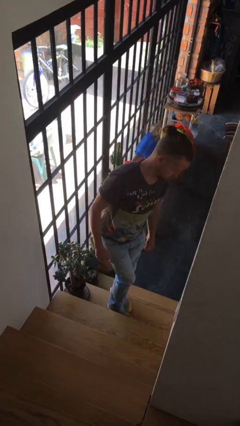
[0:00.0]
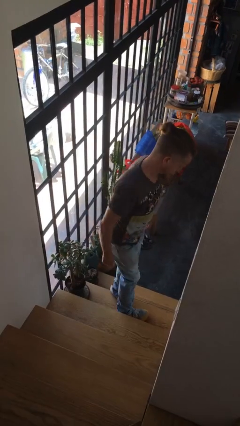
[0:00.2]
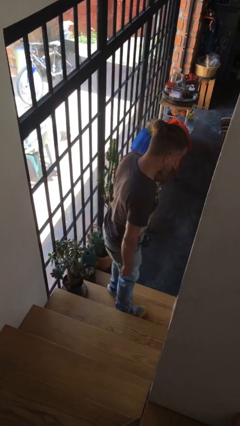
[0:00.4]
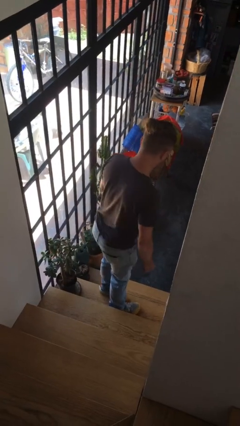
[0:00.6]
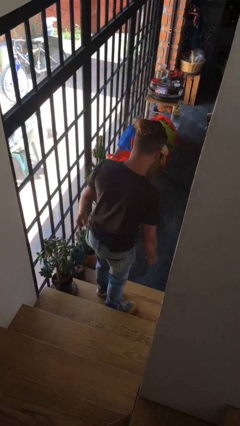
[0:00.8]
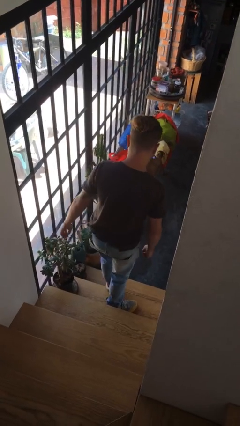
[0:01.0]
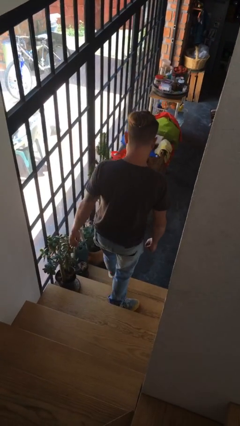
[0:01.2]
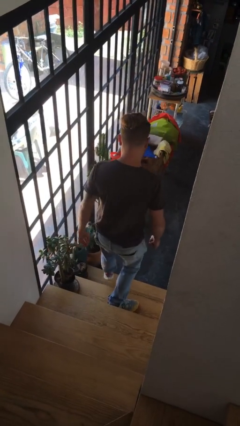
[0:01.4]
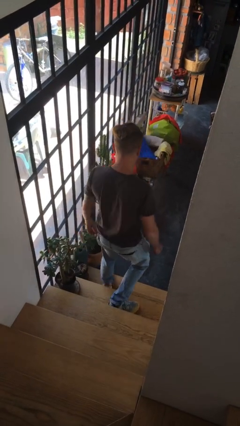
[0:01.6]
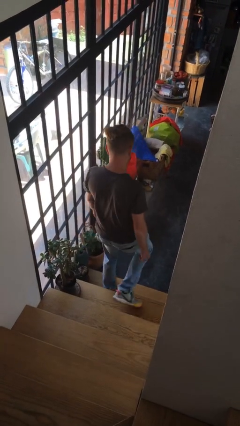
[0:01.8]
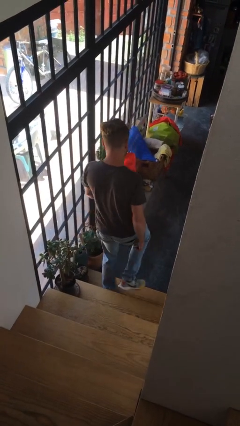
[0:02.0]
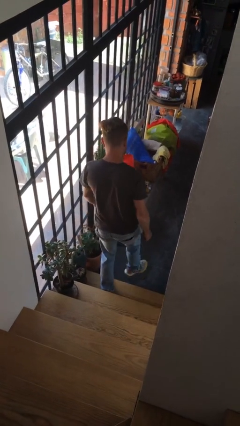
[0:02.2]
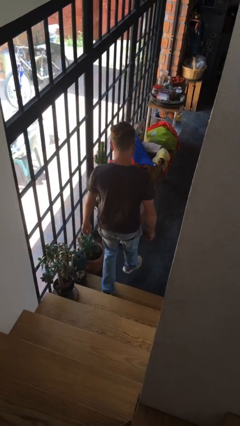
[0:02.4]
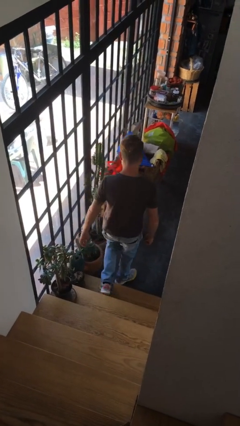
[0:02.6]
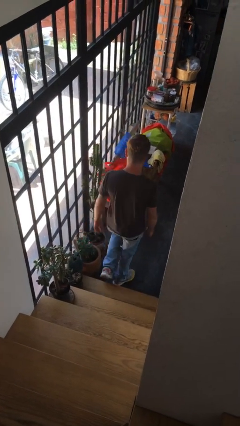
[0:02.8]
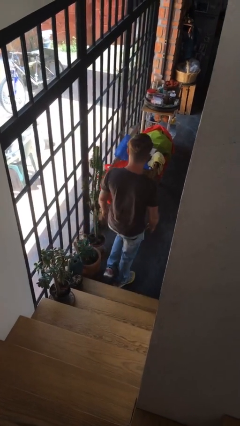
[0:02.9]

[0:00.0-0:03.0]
person climbs down stairs

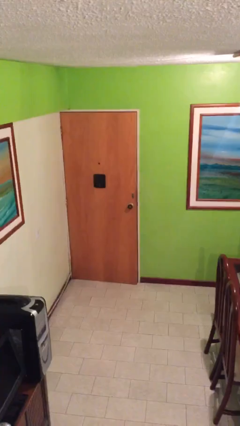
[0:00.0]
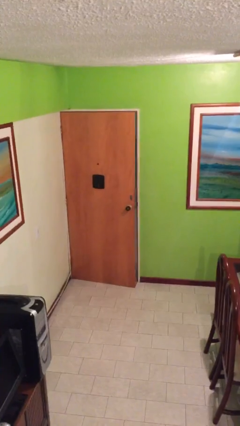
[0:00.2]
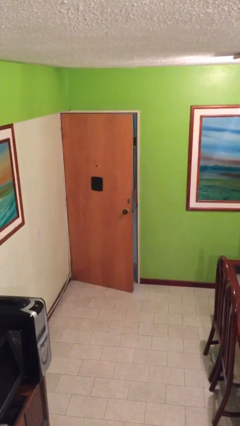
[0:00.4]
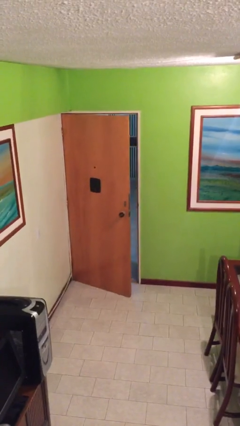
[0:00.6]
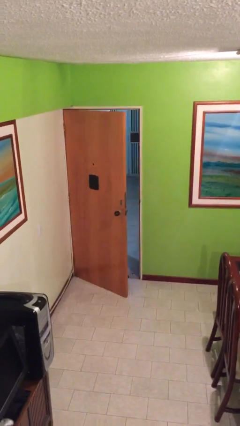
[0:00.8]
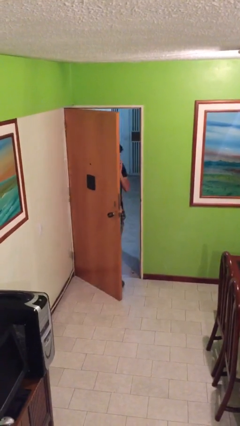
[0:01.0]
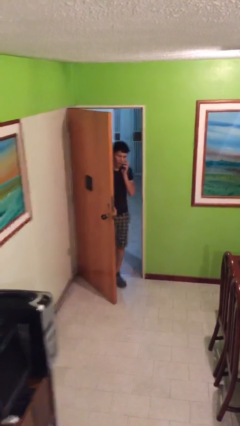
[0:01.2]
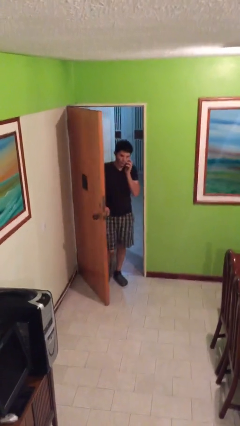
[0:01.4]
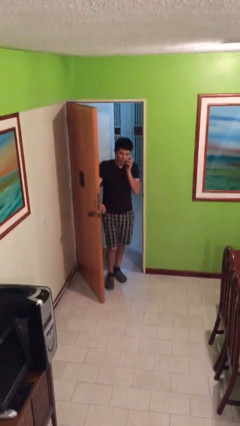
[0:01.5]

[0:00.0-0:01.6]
person opens facility door

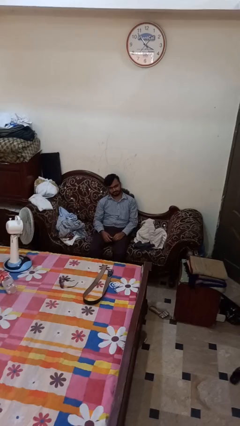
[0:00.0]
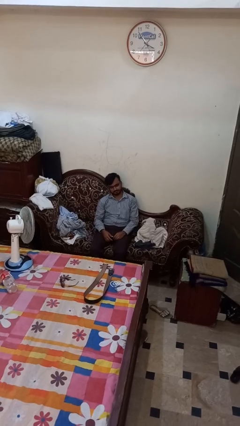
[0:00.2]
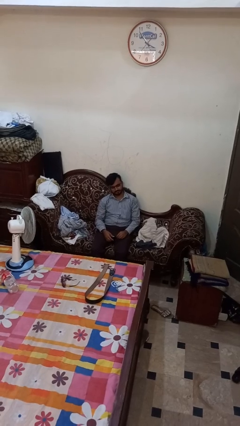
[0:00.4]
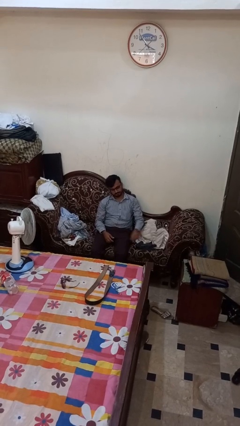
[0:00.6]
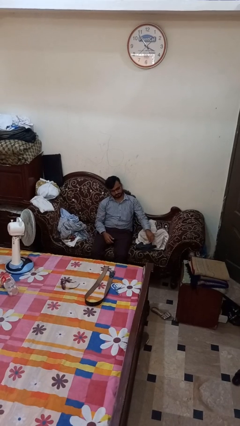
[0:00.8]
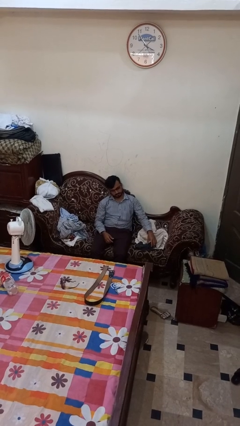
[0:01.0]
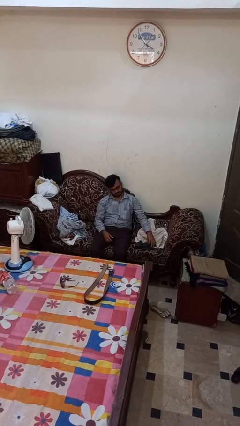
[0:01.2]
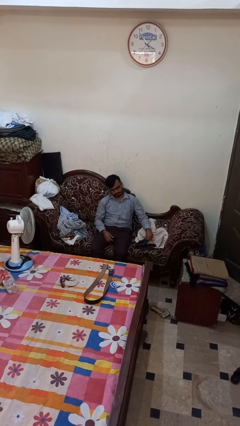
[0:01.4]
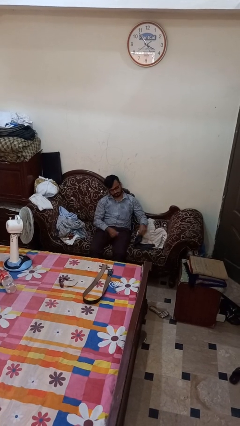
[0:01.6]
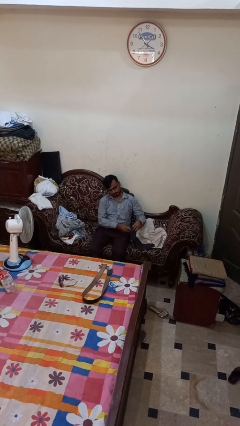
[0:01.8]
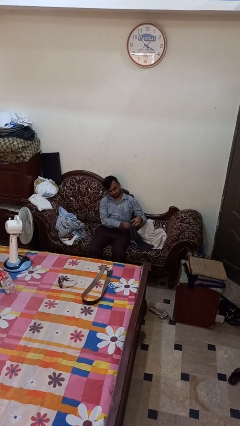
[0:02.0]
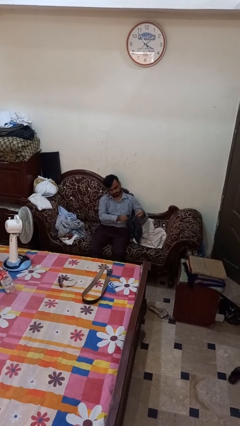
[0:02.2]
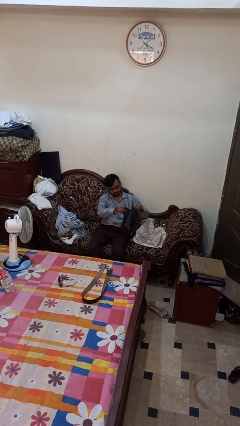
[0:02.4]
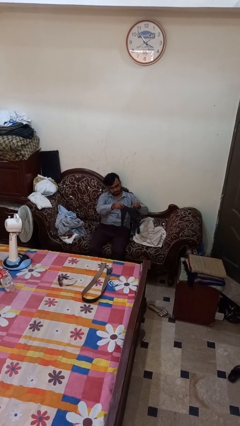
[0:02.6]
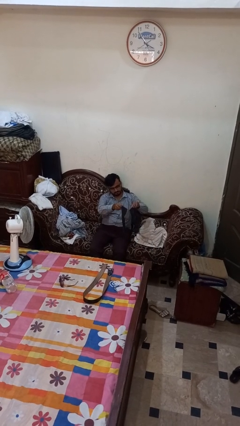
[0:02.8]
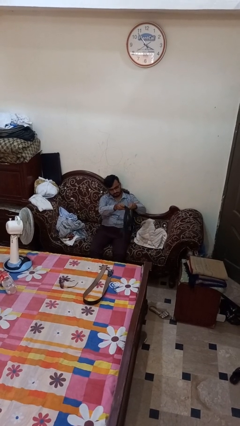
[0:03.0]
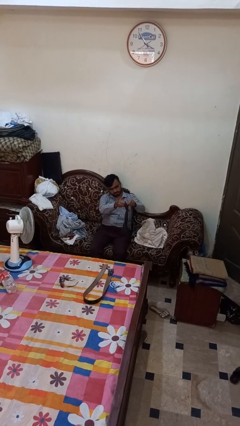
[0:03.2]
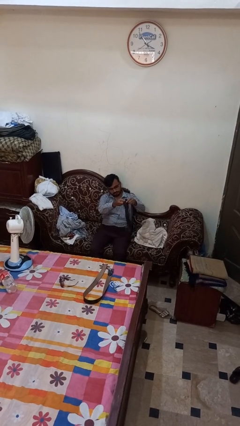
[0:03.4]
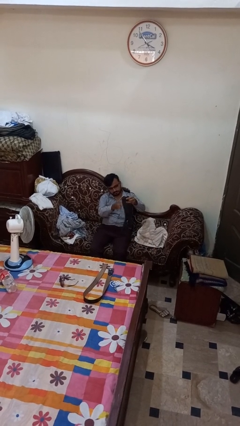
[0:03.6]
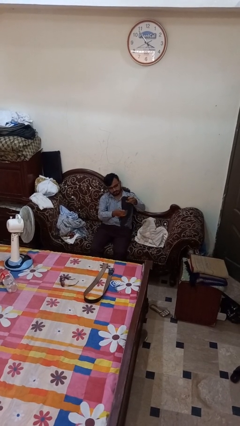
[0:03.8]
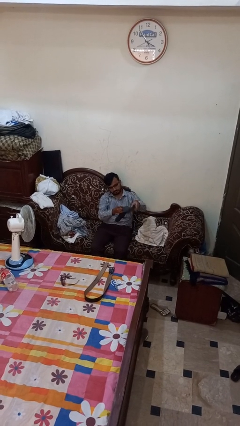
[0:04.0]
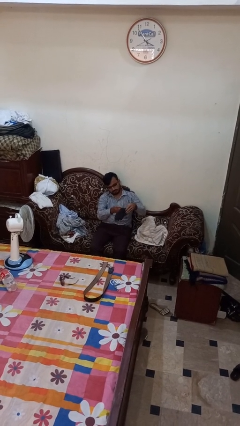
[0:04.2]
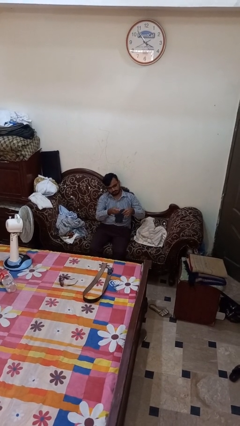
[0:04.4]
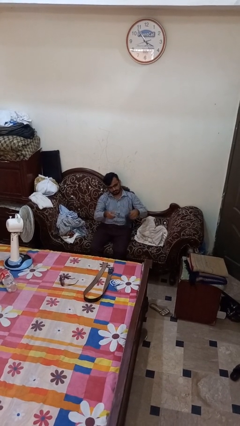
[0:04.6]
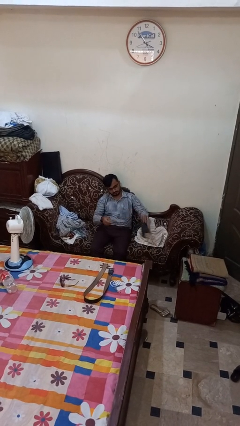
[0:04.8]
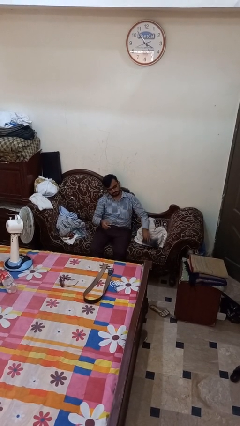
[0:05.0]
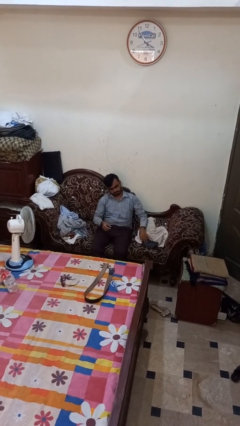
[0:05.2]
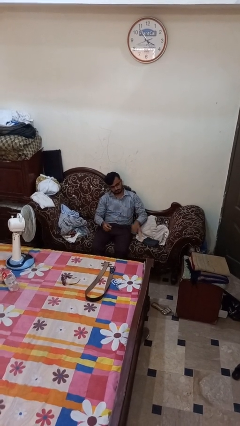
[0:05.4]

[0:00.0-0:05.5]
person folds socks

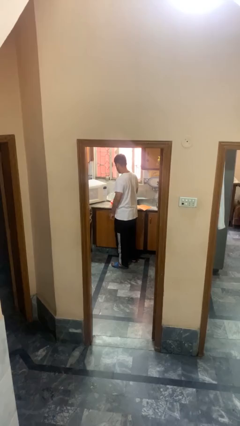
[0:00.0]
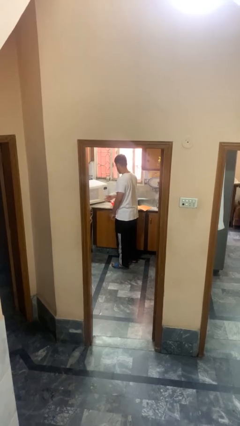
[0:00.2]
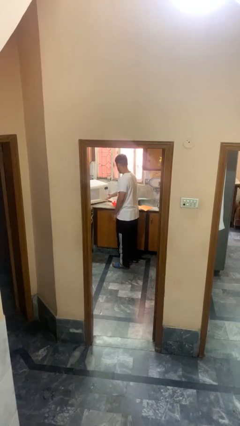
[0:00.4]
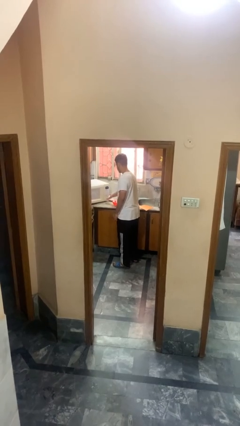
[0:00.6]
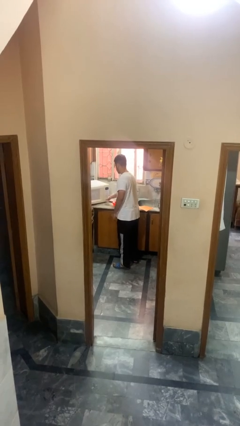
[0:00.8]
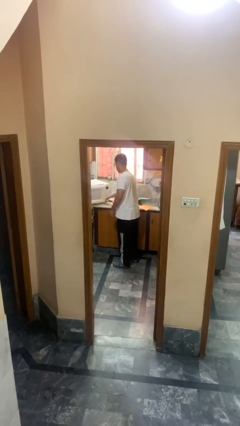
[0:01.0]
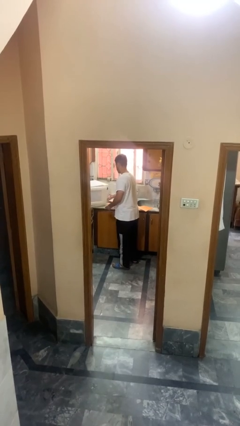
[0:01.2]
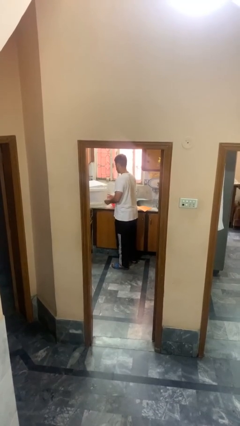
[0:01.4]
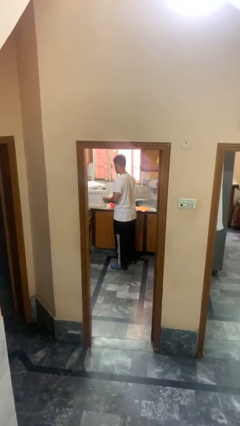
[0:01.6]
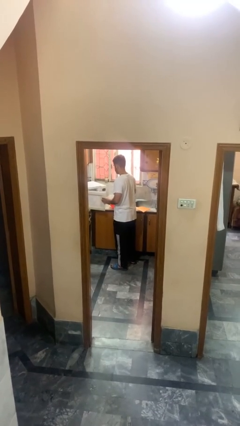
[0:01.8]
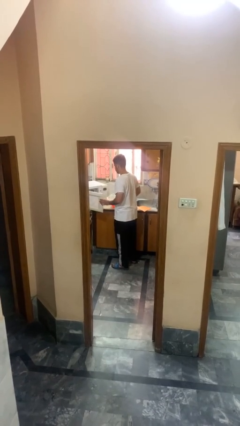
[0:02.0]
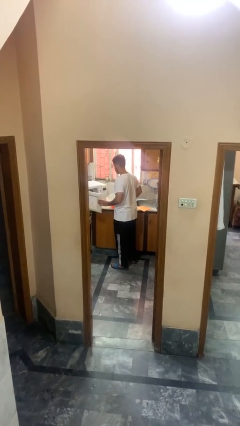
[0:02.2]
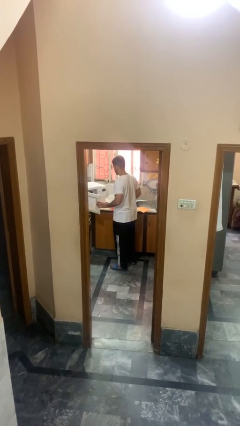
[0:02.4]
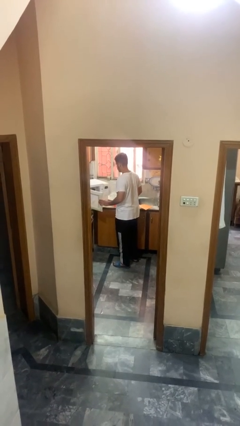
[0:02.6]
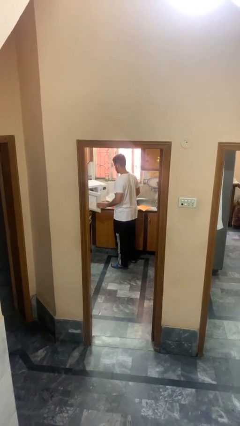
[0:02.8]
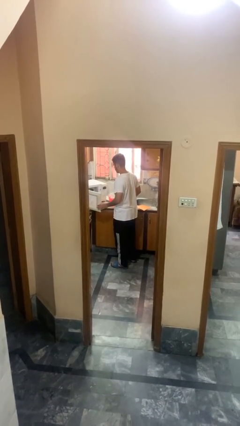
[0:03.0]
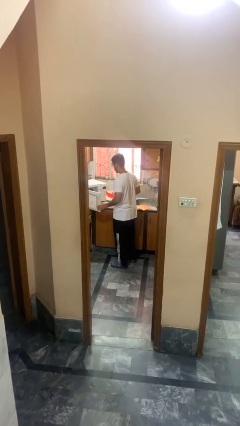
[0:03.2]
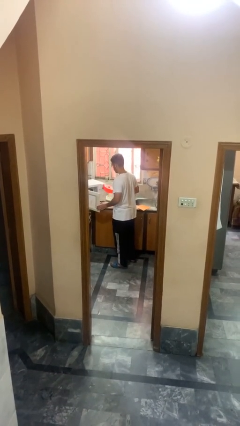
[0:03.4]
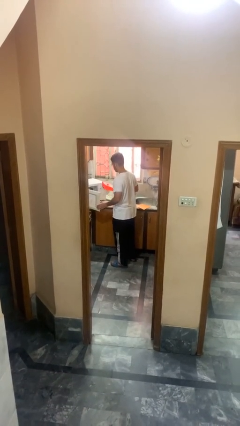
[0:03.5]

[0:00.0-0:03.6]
person opens microwave

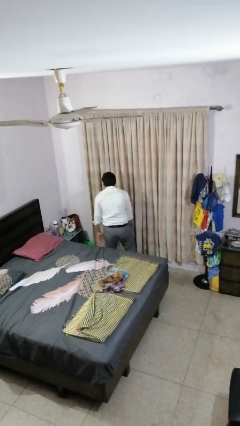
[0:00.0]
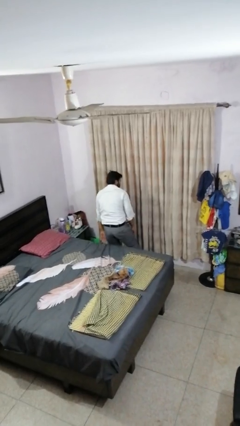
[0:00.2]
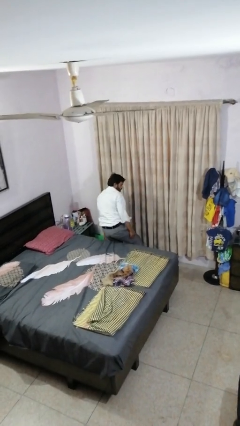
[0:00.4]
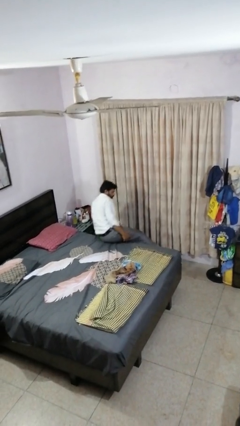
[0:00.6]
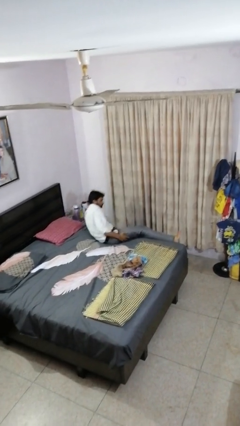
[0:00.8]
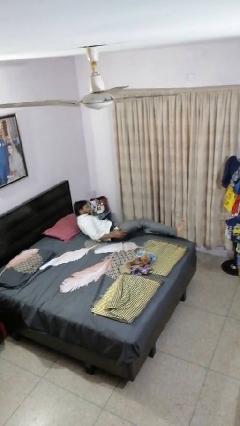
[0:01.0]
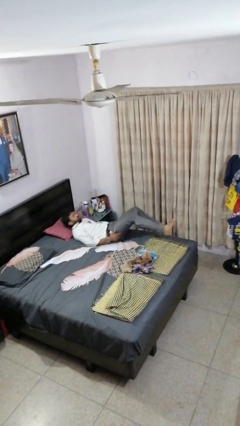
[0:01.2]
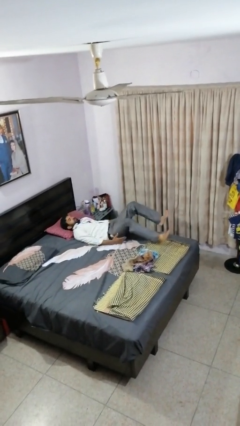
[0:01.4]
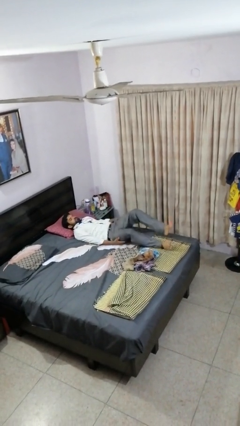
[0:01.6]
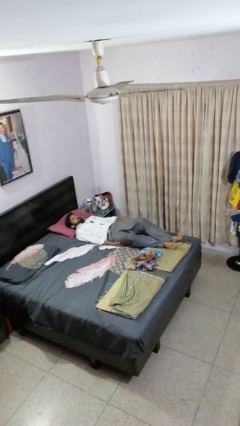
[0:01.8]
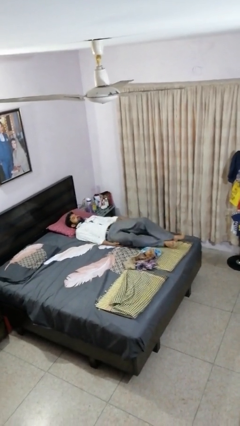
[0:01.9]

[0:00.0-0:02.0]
person lies down on bed

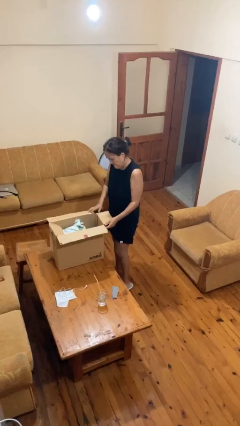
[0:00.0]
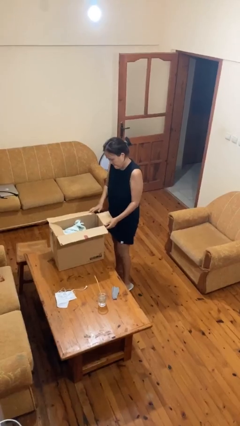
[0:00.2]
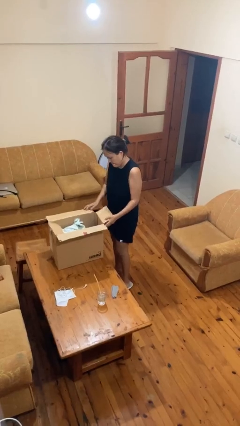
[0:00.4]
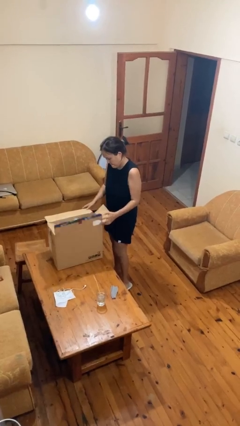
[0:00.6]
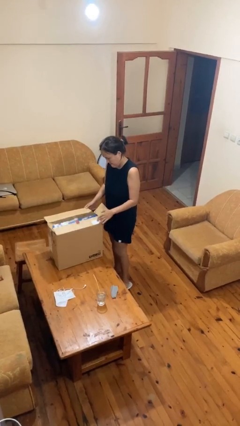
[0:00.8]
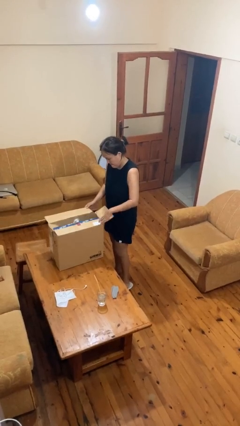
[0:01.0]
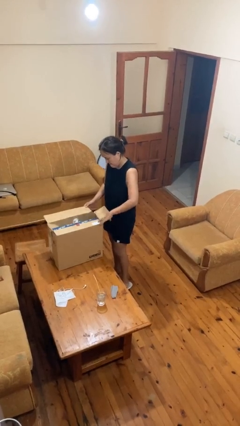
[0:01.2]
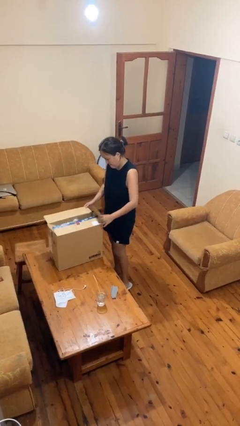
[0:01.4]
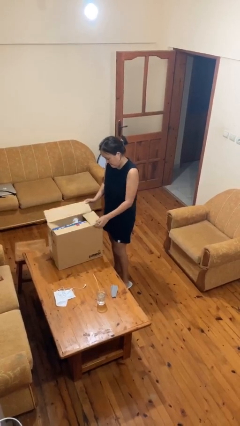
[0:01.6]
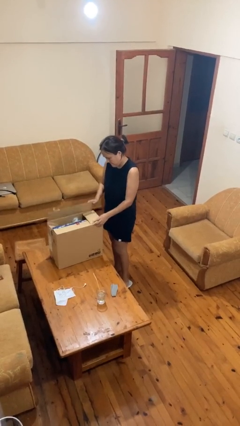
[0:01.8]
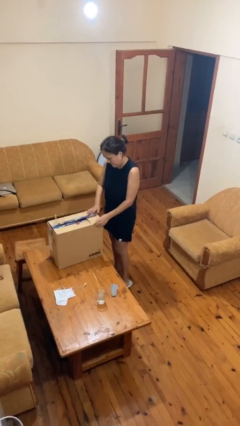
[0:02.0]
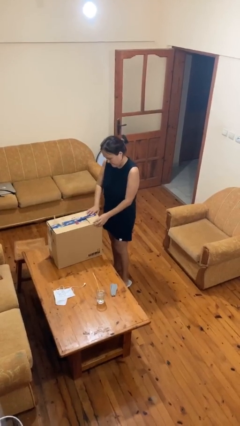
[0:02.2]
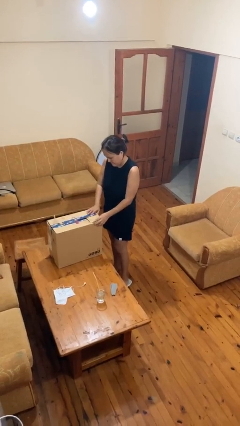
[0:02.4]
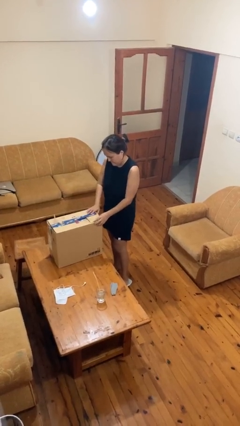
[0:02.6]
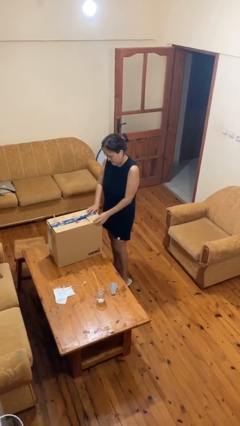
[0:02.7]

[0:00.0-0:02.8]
person closes box
